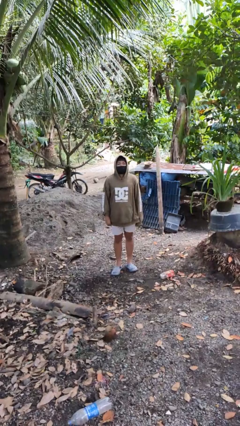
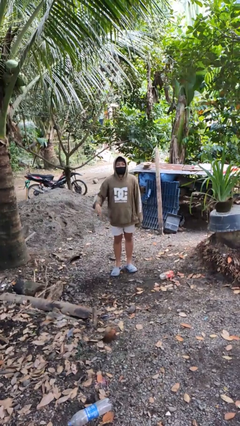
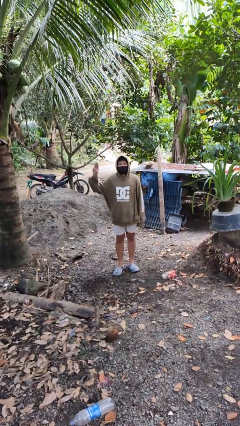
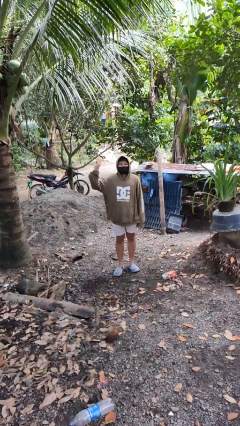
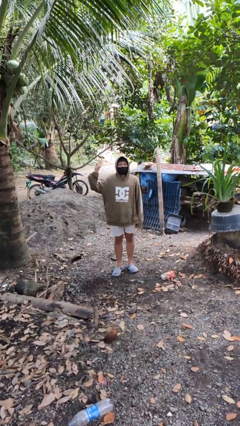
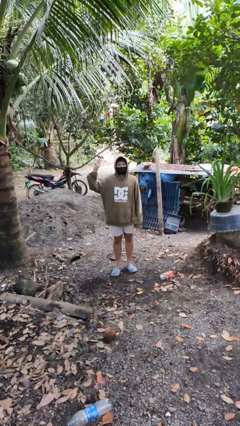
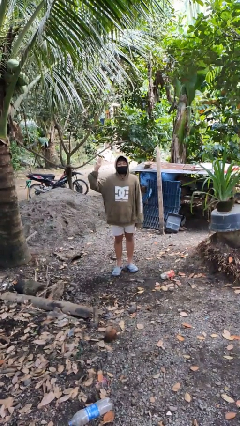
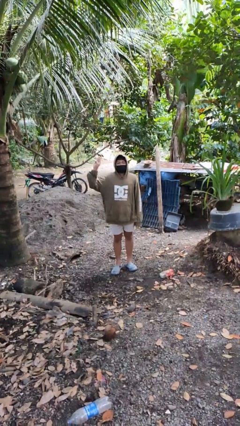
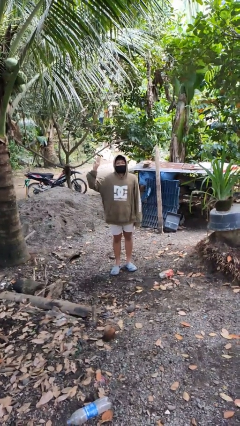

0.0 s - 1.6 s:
person gestures number three

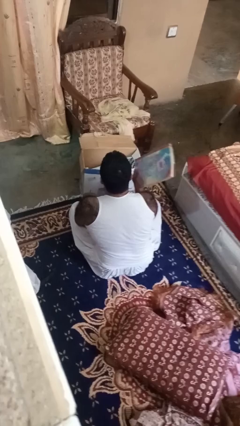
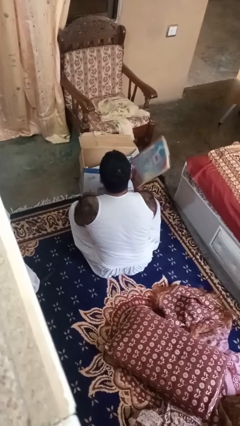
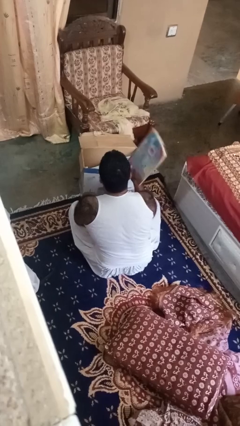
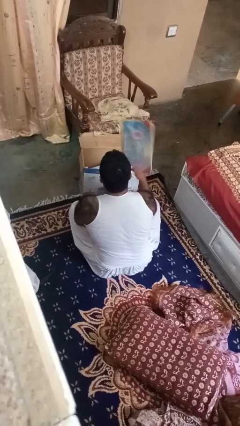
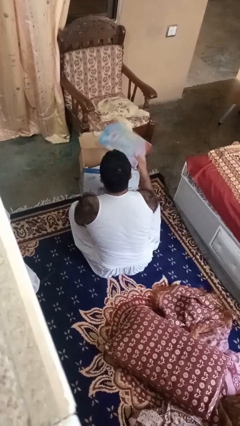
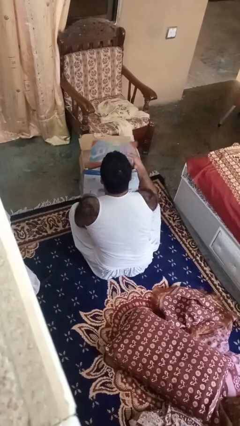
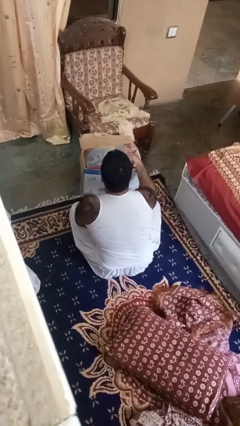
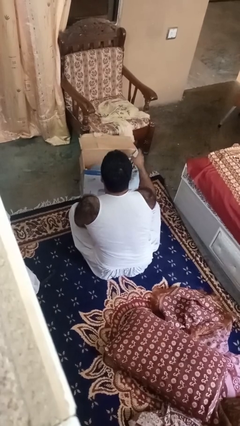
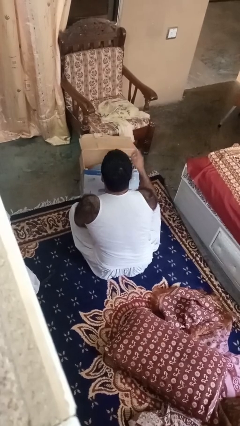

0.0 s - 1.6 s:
person puts object into box

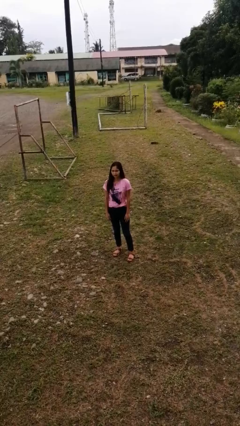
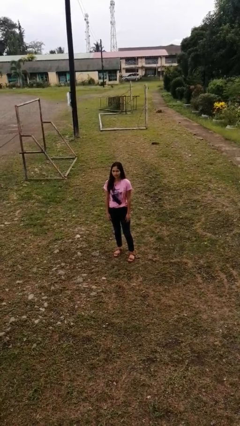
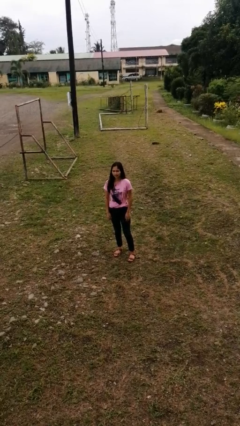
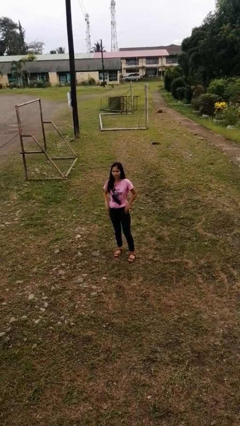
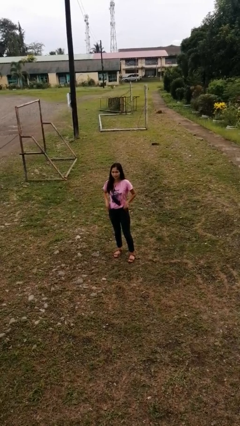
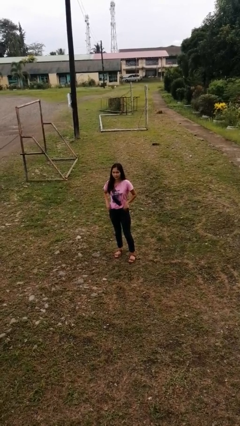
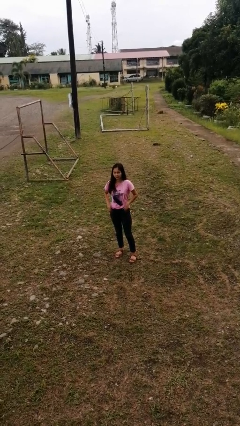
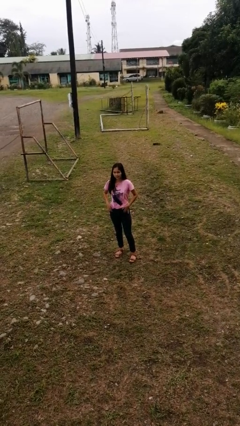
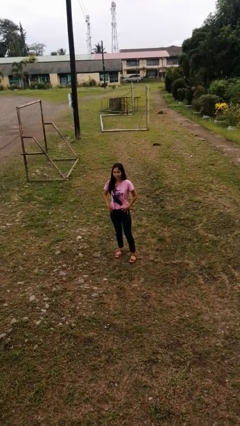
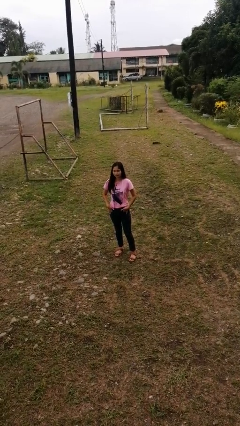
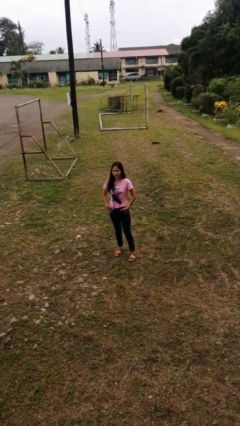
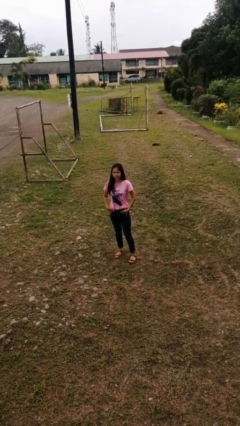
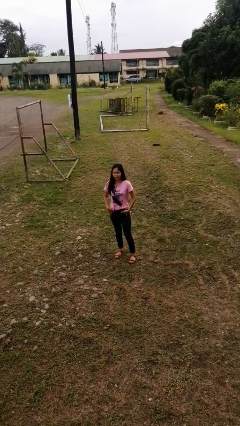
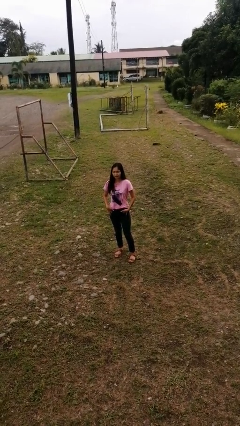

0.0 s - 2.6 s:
person puts hands in back pockets

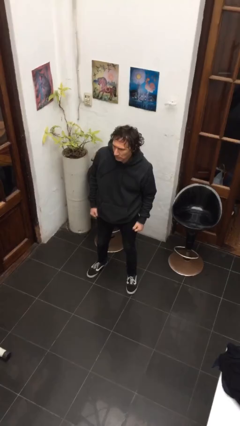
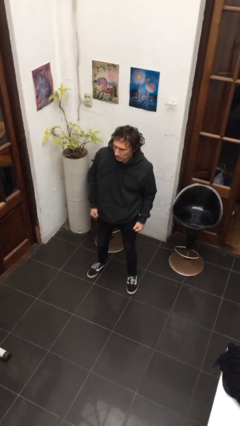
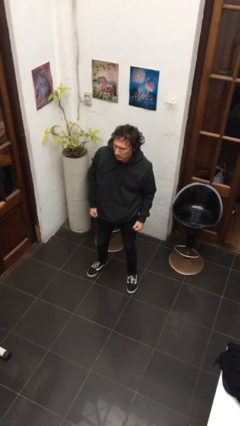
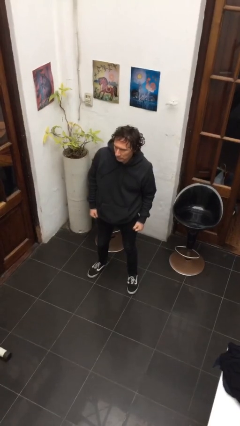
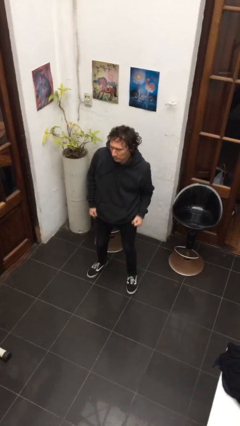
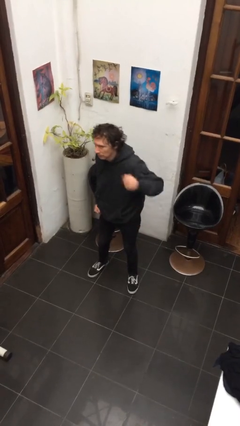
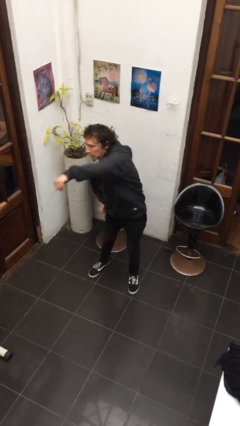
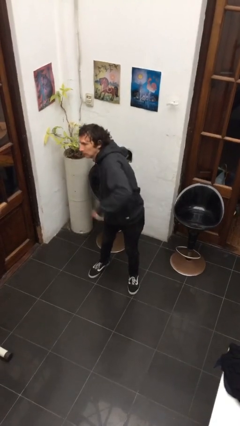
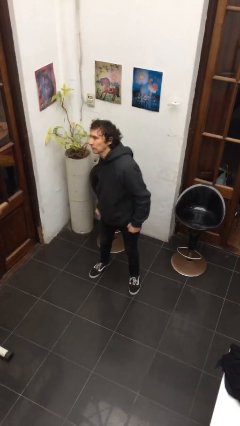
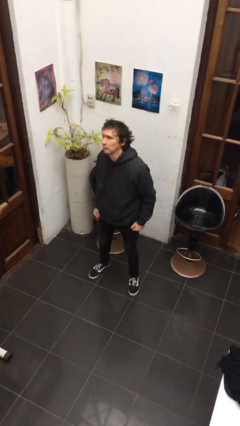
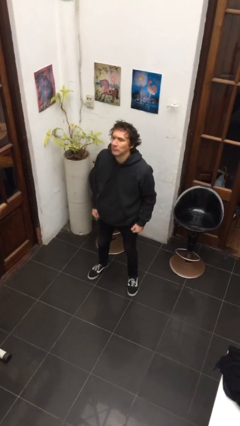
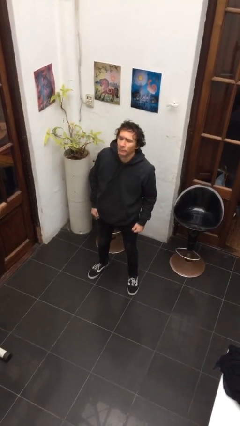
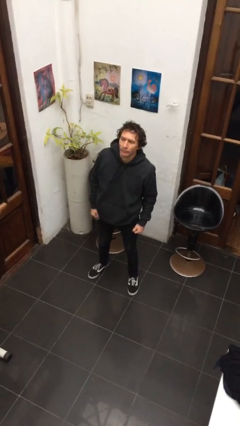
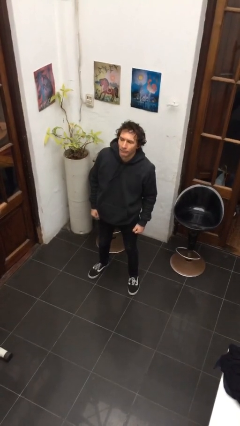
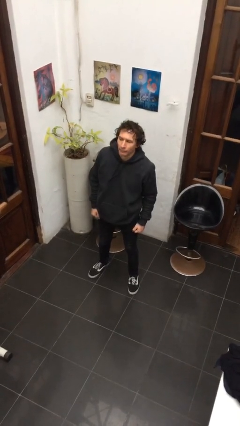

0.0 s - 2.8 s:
person punches

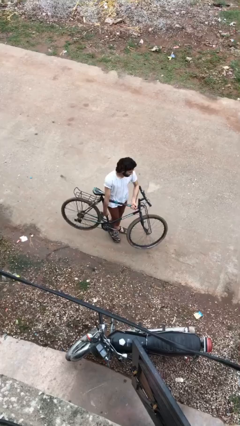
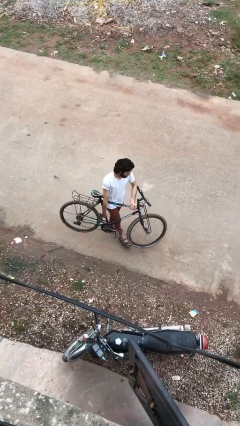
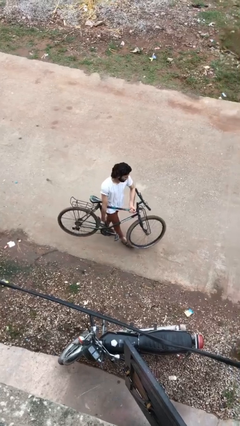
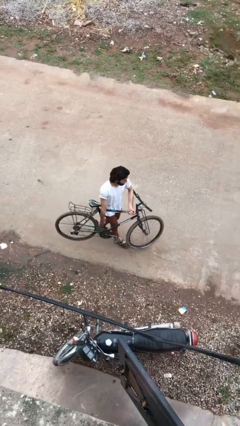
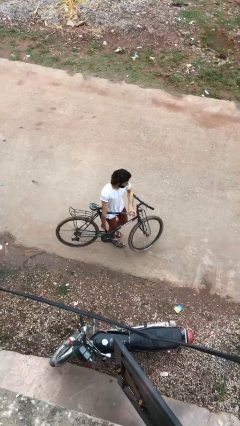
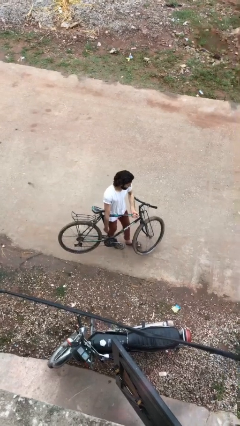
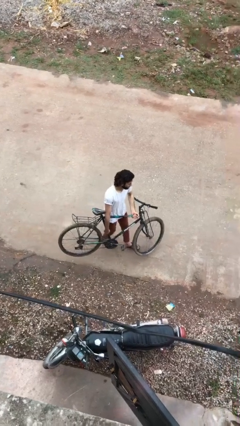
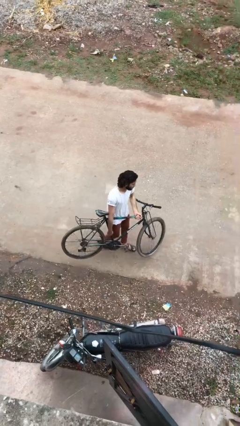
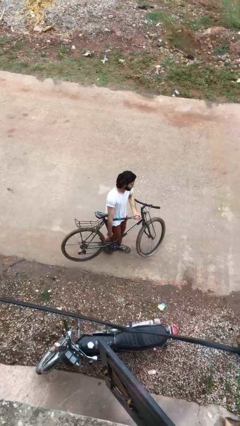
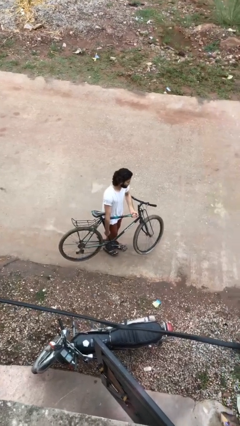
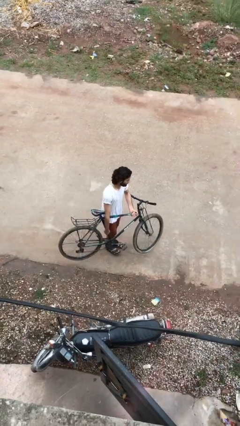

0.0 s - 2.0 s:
person carries bicycle

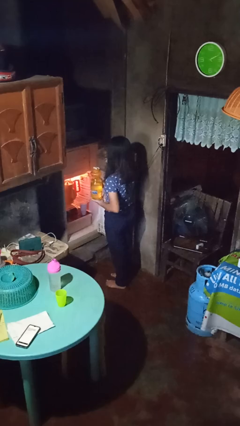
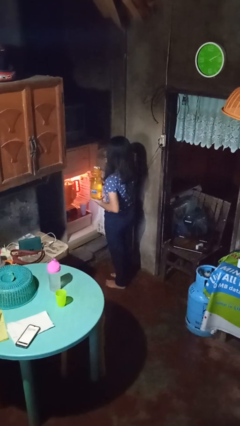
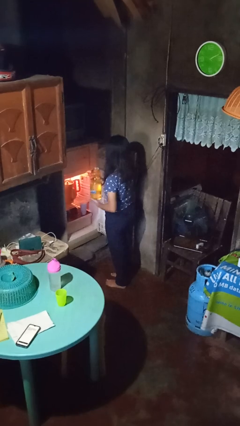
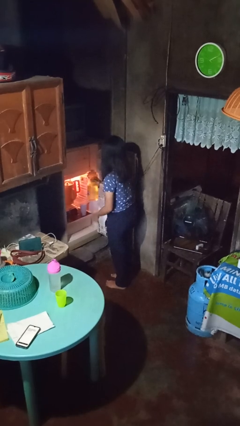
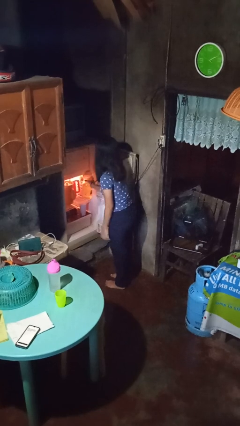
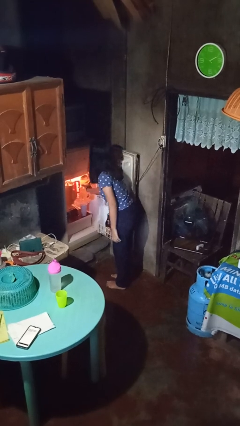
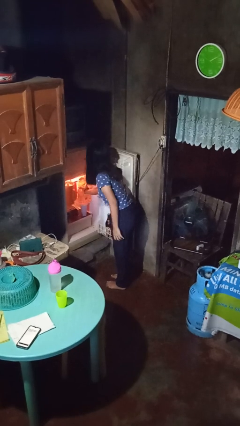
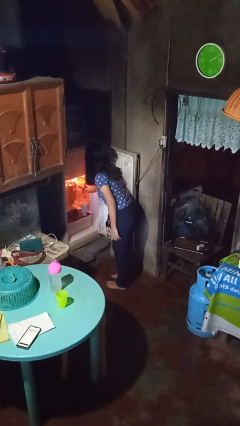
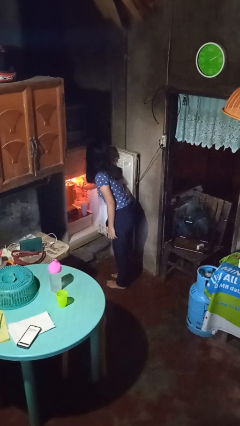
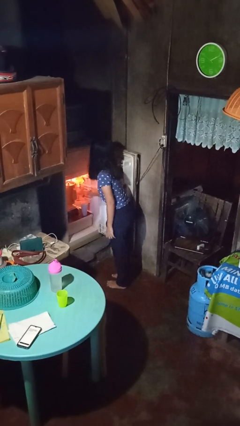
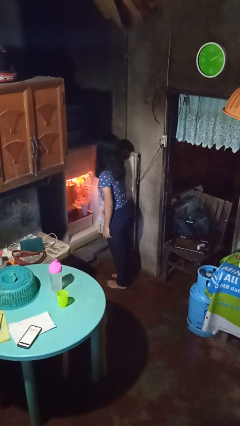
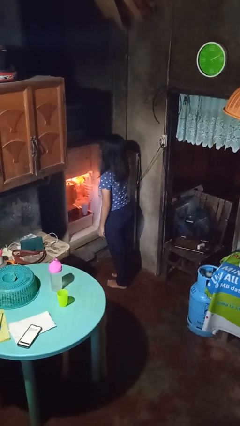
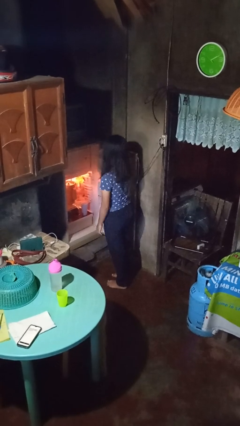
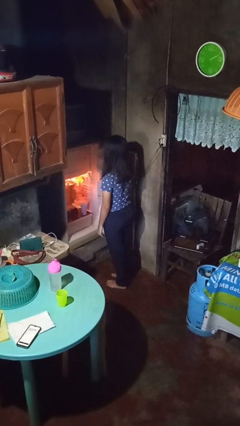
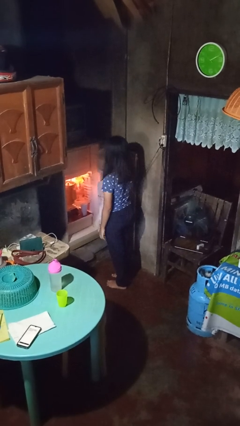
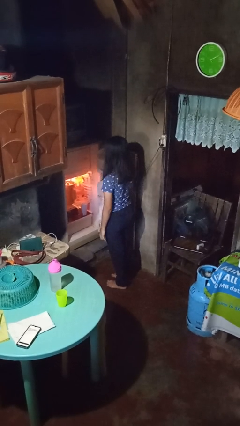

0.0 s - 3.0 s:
person puts object into refrigerator

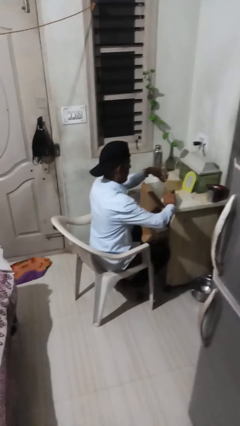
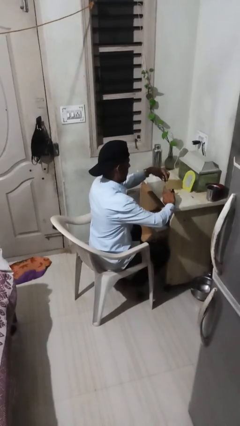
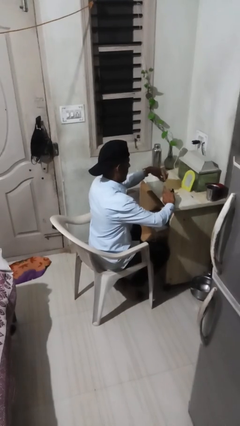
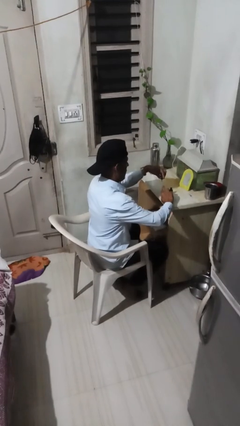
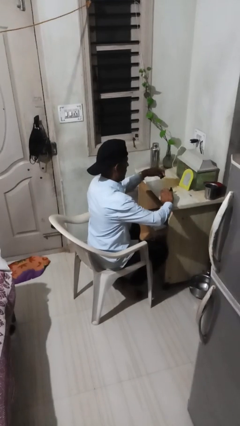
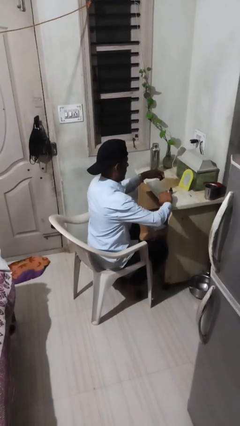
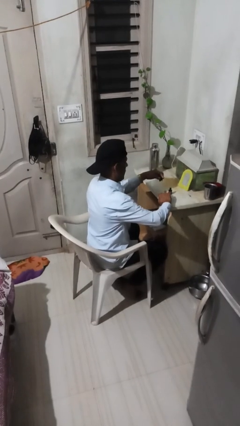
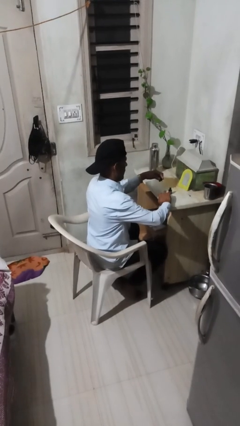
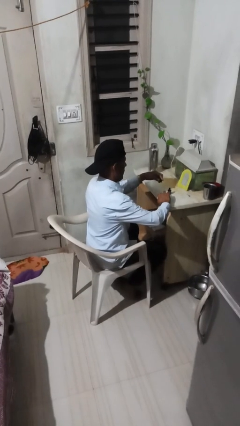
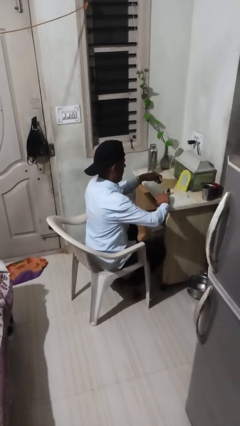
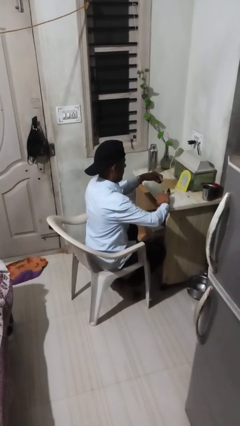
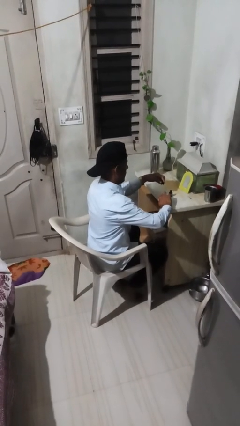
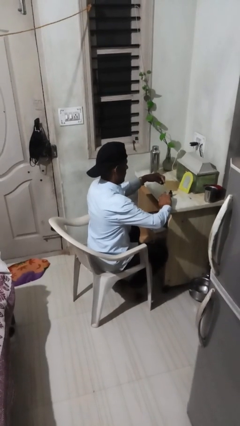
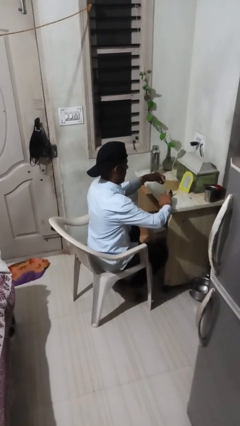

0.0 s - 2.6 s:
person paints fingernails

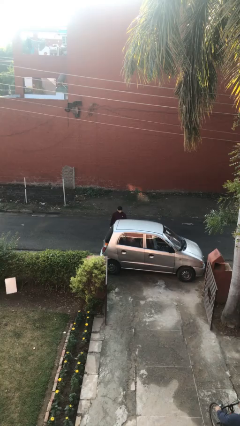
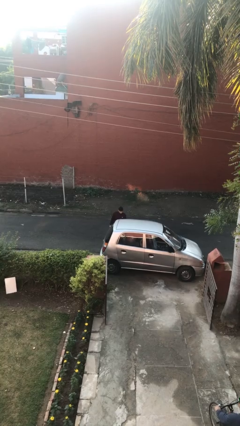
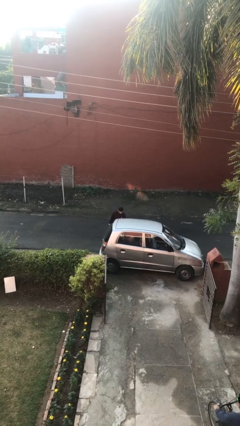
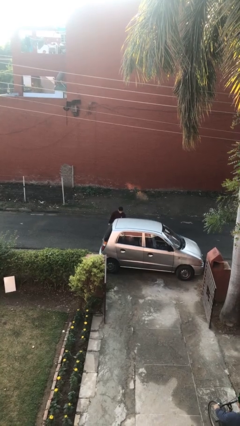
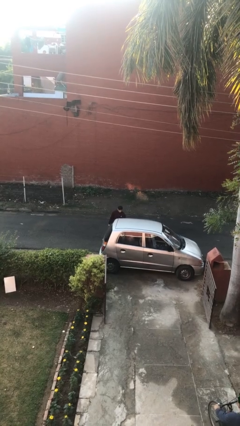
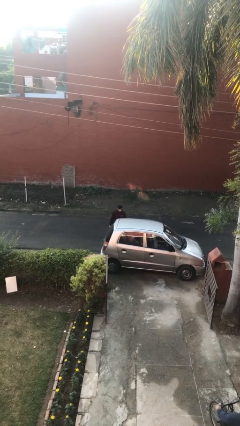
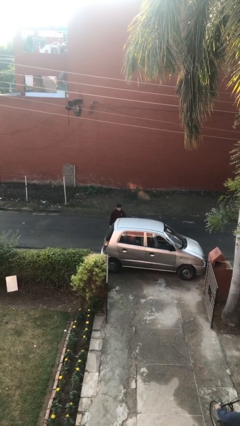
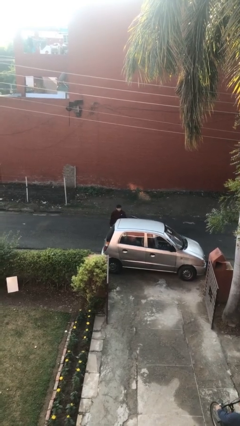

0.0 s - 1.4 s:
person opens car door
